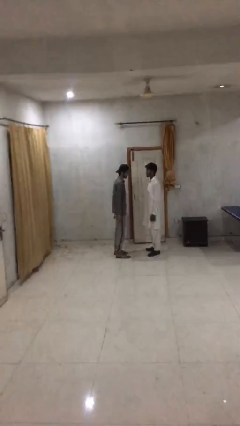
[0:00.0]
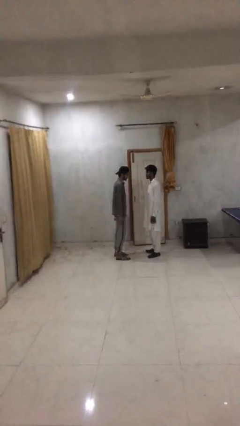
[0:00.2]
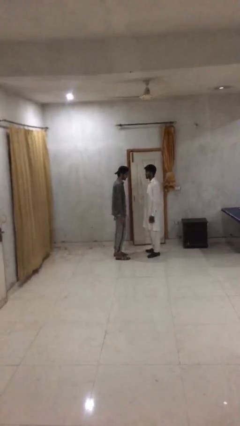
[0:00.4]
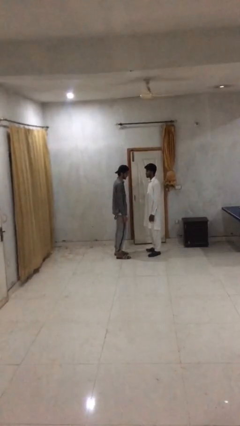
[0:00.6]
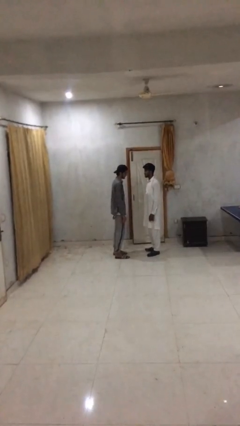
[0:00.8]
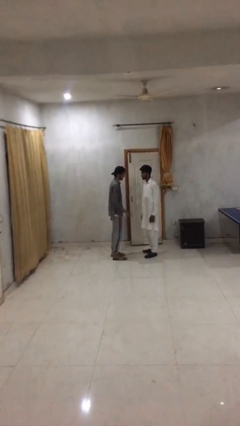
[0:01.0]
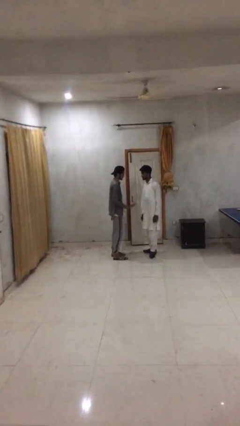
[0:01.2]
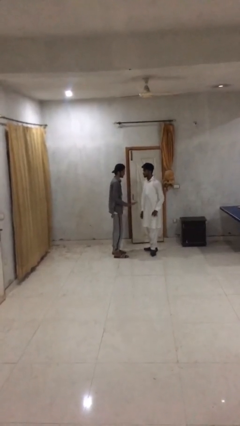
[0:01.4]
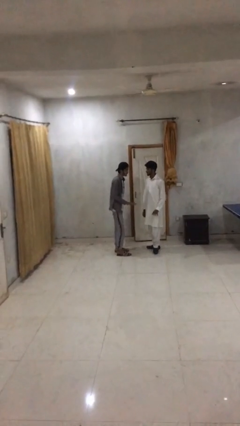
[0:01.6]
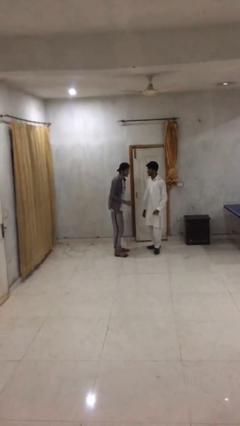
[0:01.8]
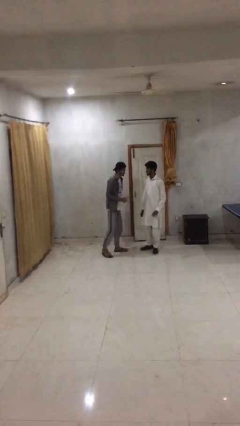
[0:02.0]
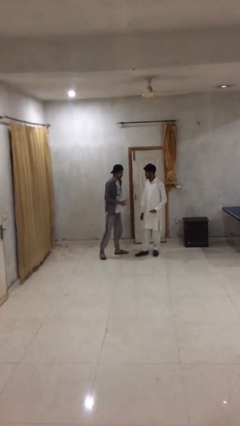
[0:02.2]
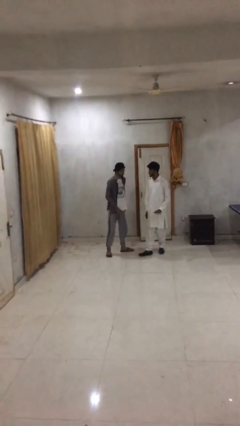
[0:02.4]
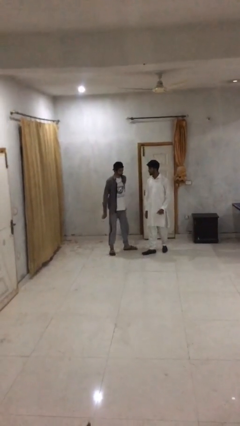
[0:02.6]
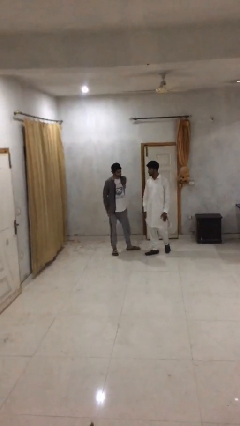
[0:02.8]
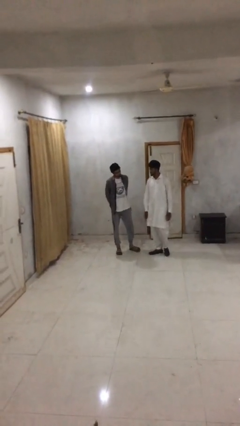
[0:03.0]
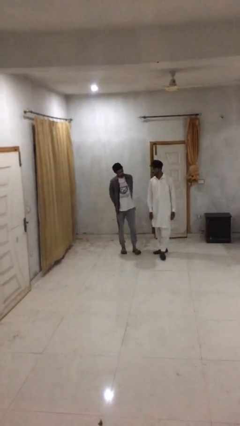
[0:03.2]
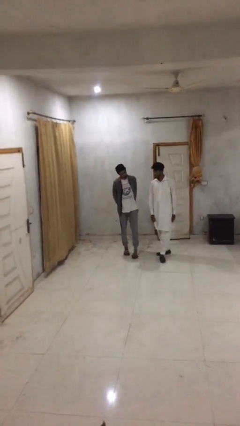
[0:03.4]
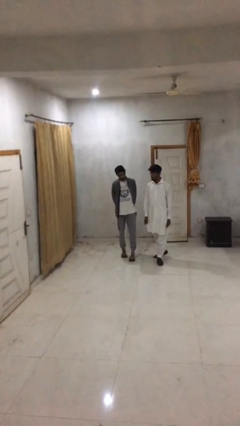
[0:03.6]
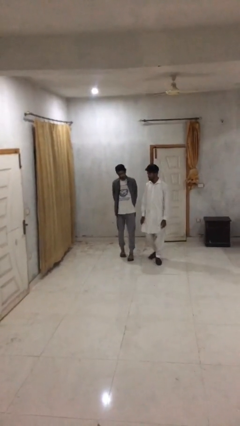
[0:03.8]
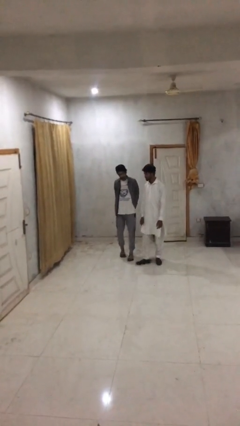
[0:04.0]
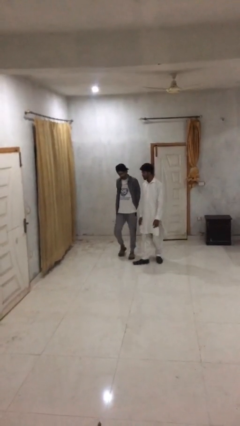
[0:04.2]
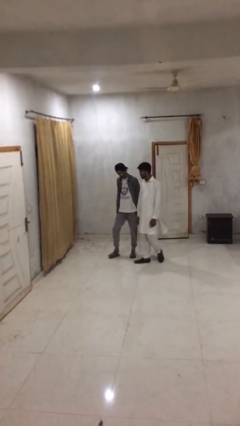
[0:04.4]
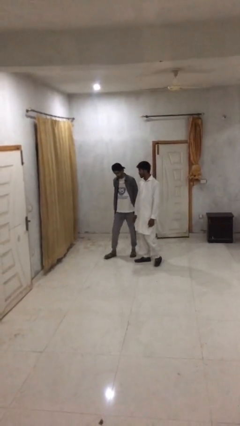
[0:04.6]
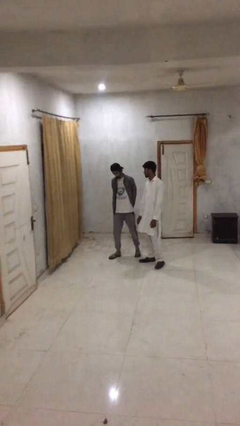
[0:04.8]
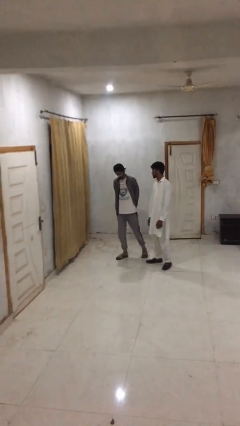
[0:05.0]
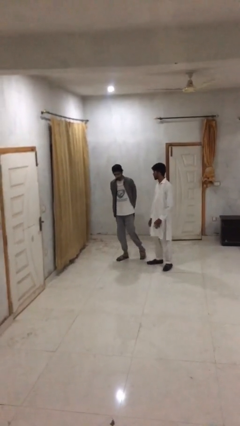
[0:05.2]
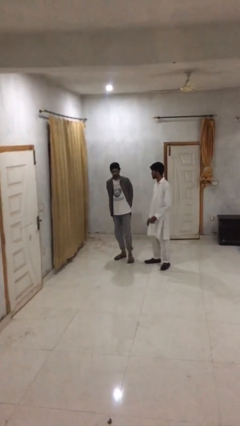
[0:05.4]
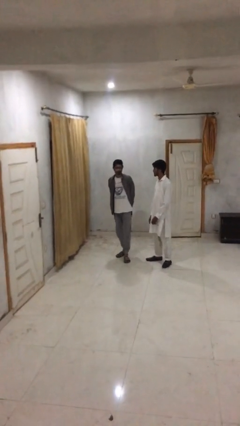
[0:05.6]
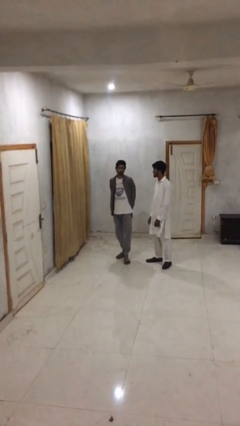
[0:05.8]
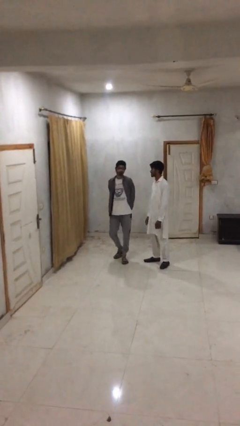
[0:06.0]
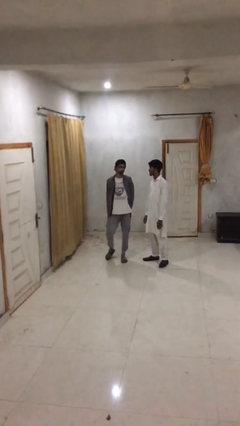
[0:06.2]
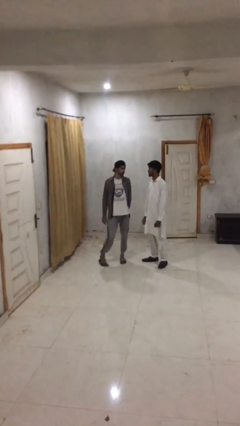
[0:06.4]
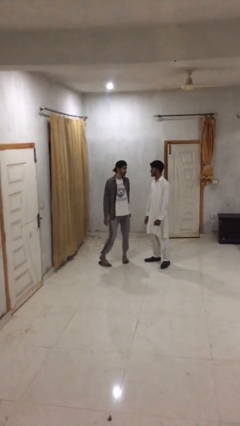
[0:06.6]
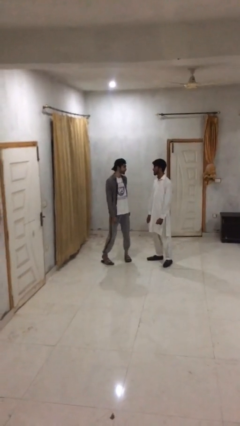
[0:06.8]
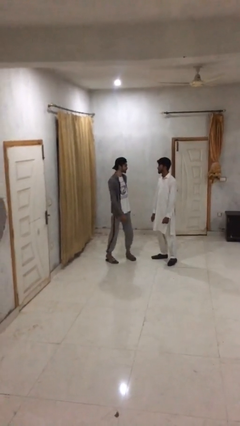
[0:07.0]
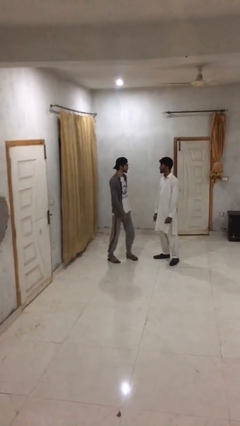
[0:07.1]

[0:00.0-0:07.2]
person talks to person

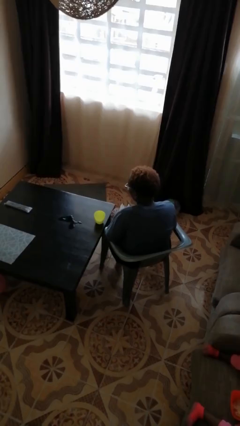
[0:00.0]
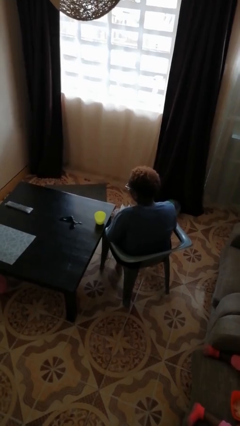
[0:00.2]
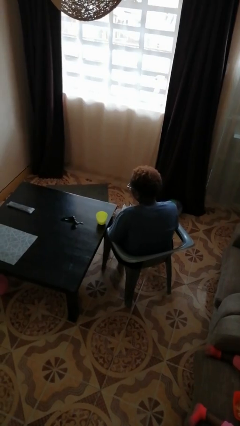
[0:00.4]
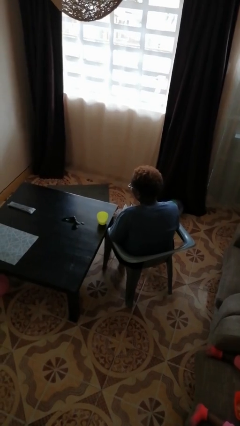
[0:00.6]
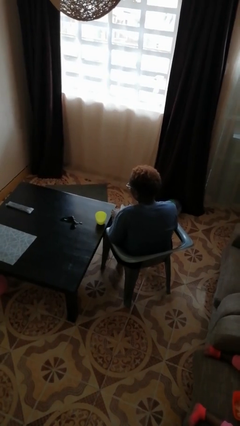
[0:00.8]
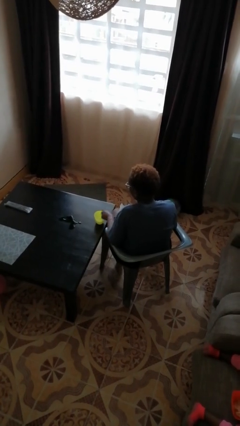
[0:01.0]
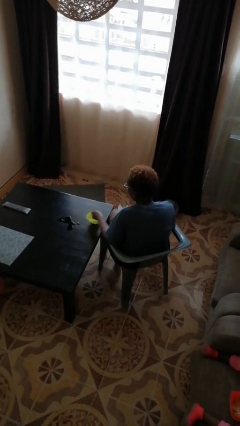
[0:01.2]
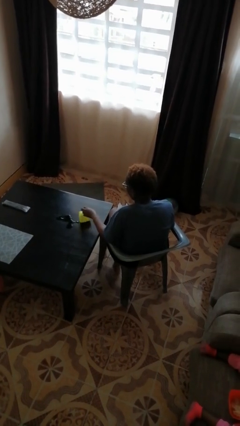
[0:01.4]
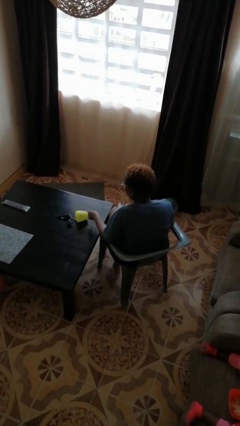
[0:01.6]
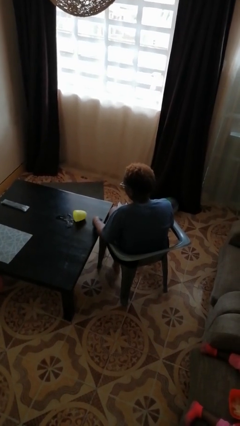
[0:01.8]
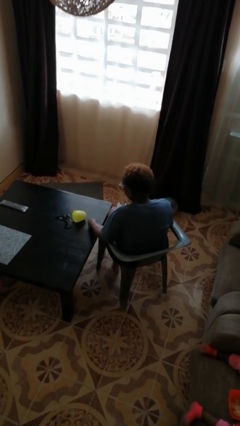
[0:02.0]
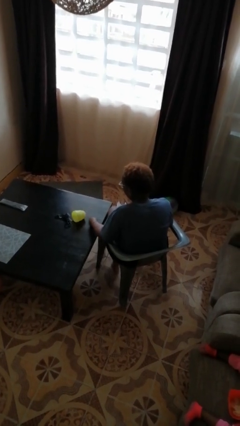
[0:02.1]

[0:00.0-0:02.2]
person spills on table

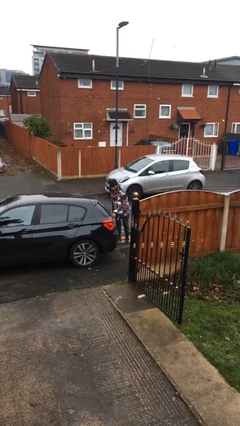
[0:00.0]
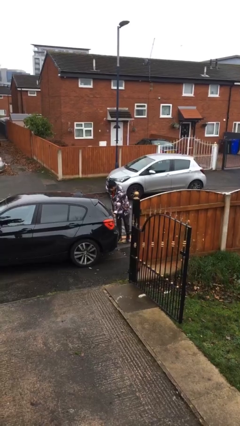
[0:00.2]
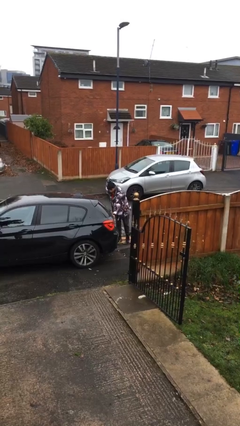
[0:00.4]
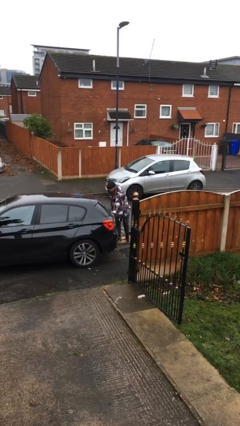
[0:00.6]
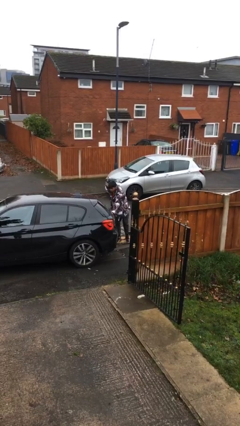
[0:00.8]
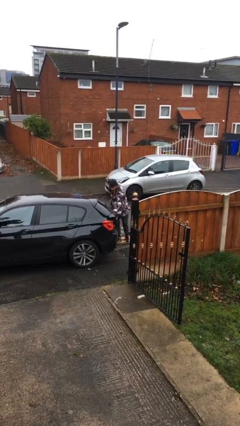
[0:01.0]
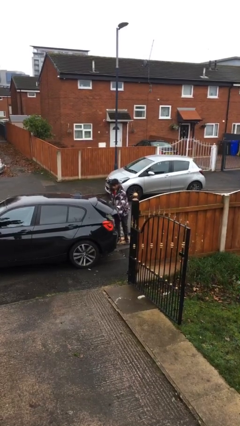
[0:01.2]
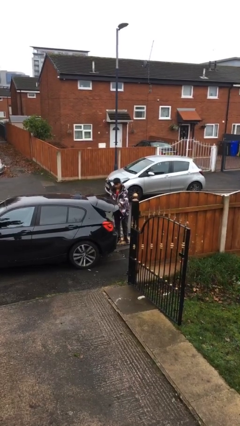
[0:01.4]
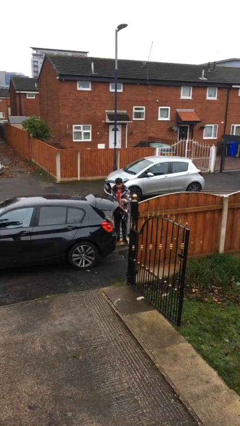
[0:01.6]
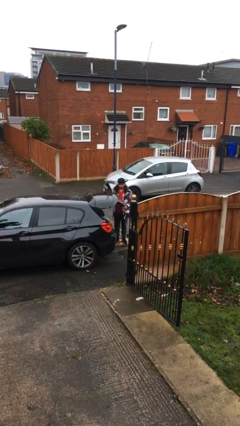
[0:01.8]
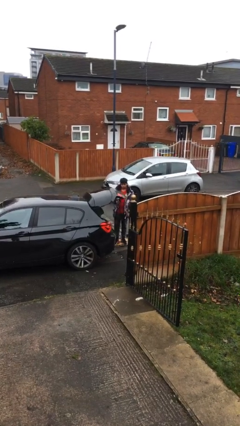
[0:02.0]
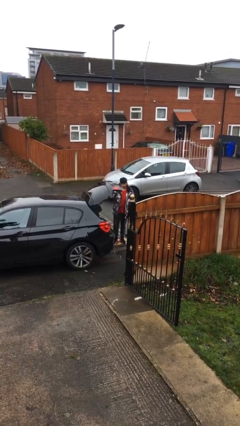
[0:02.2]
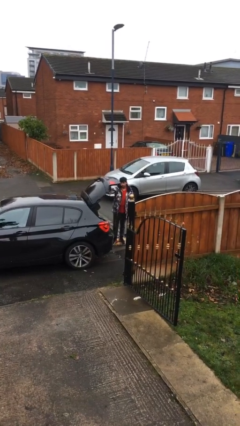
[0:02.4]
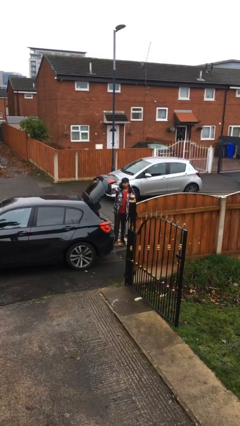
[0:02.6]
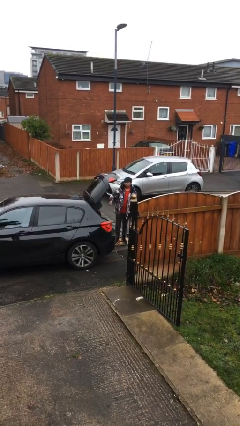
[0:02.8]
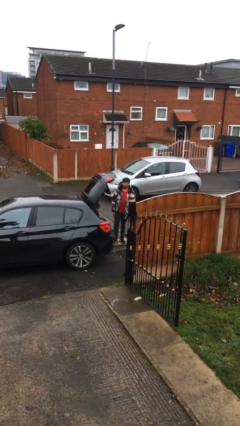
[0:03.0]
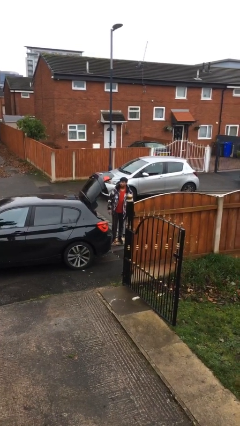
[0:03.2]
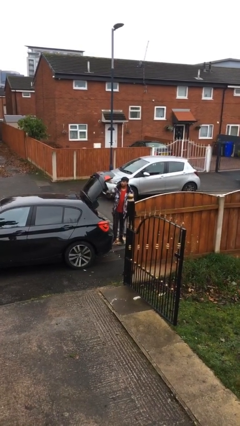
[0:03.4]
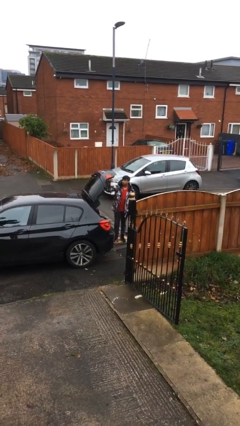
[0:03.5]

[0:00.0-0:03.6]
person opens car trunk

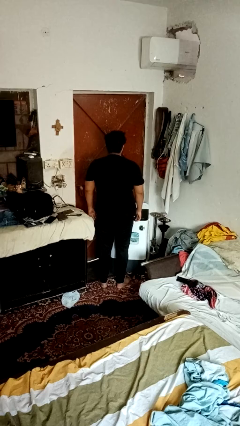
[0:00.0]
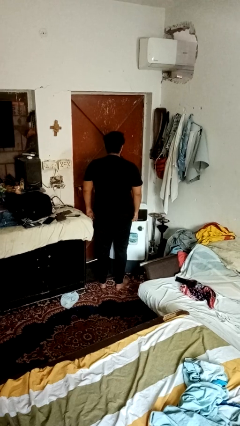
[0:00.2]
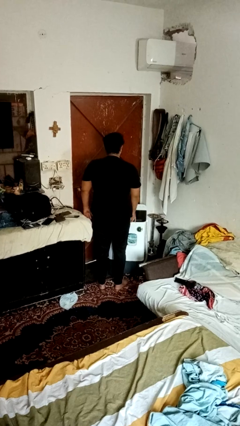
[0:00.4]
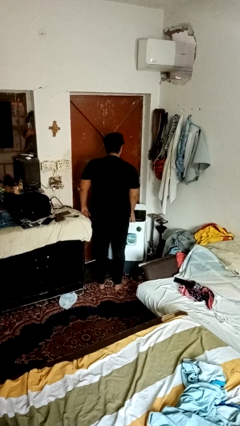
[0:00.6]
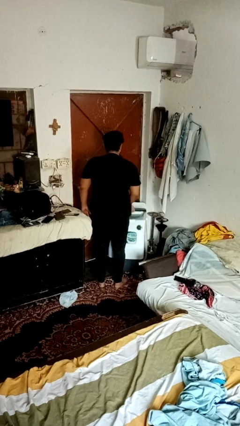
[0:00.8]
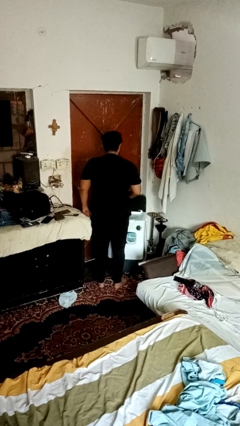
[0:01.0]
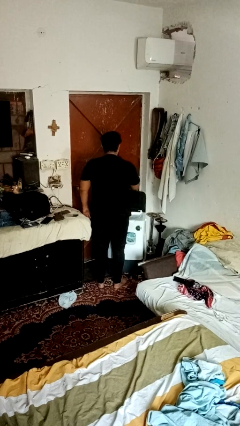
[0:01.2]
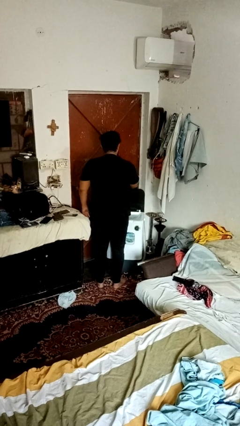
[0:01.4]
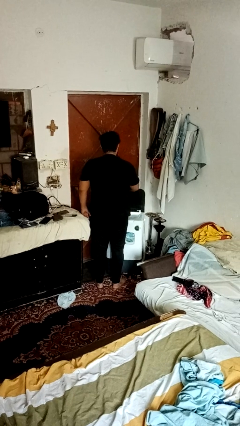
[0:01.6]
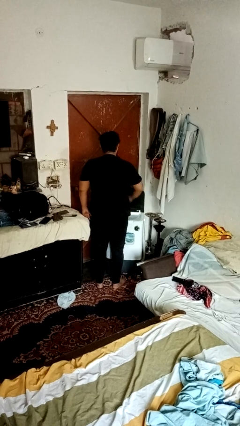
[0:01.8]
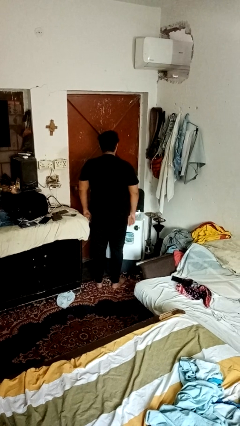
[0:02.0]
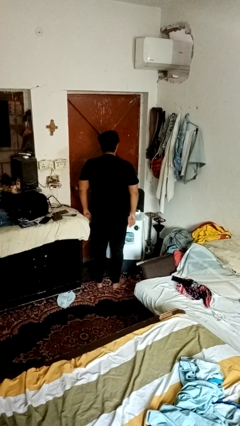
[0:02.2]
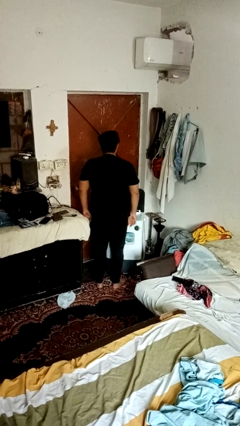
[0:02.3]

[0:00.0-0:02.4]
person opens clothes washer

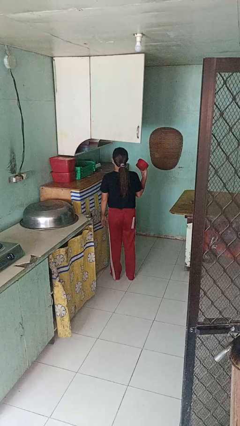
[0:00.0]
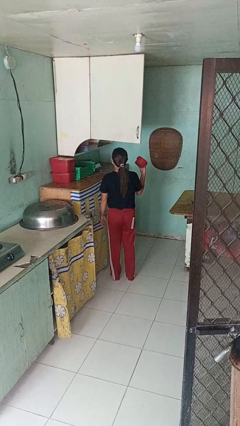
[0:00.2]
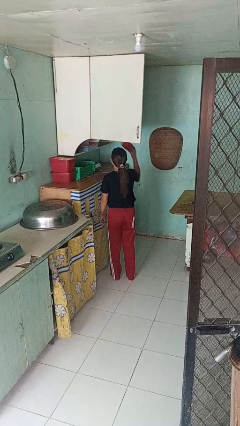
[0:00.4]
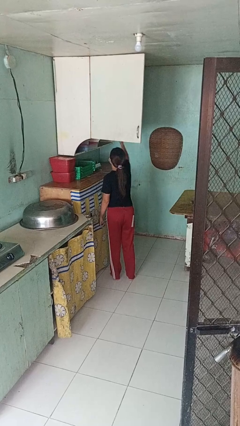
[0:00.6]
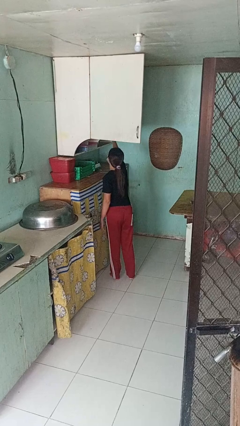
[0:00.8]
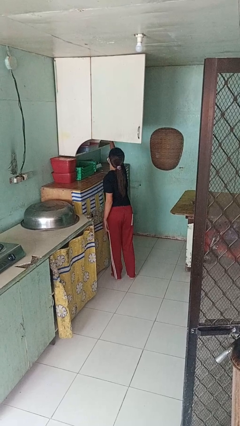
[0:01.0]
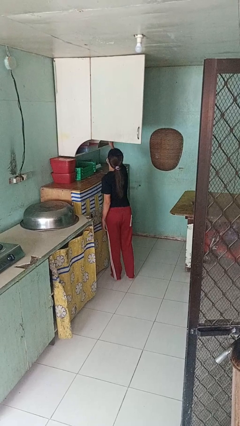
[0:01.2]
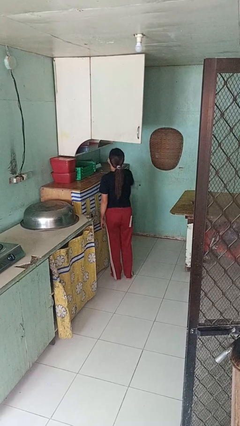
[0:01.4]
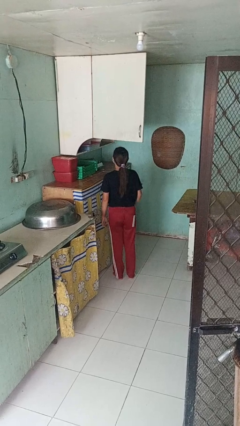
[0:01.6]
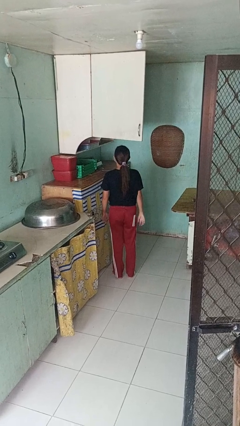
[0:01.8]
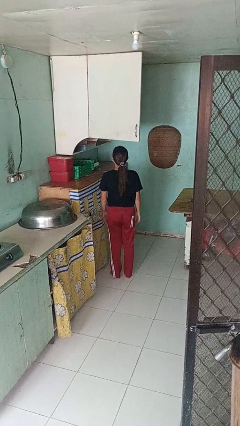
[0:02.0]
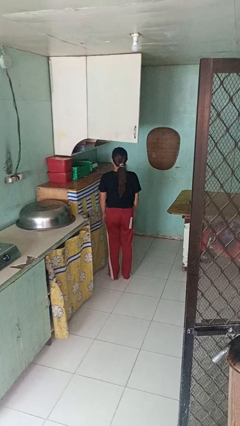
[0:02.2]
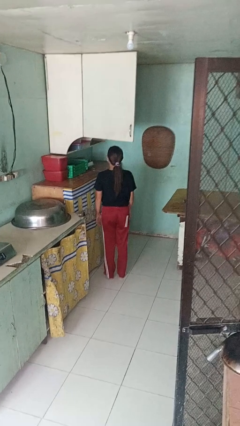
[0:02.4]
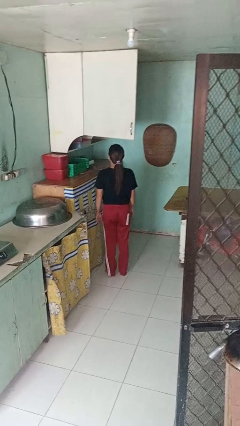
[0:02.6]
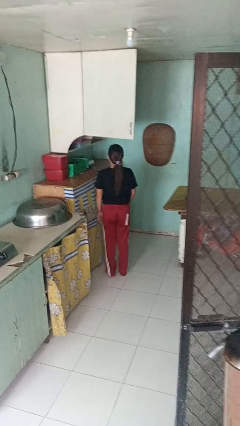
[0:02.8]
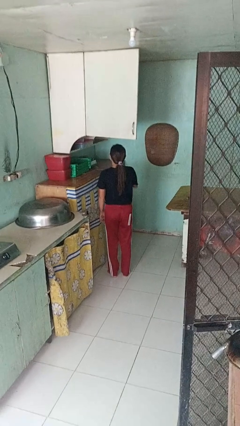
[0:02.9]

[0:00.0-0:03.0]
person puts object in cabinet
